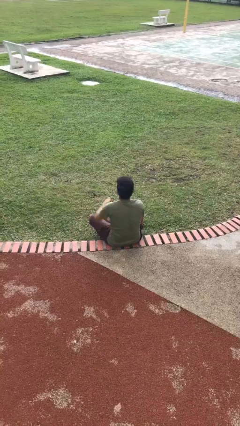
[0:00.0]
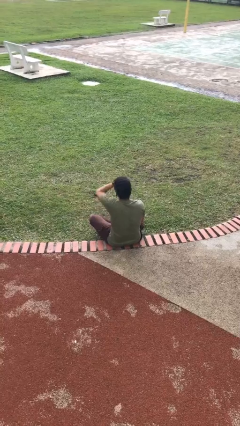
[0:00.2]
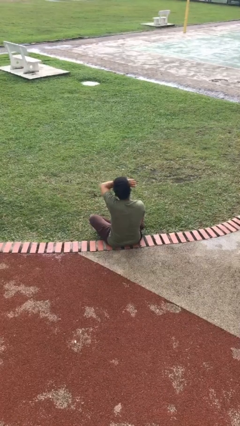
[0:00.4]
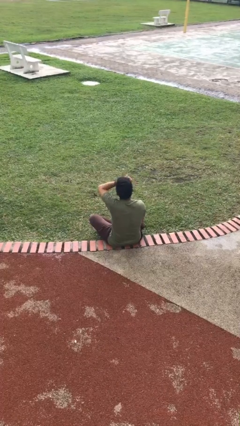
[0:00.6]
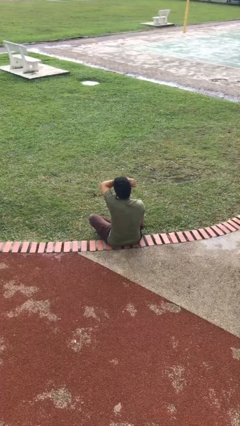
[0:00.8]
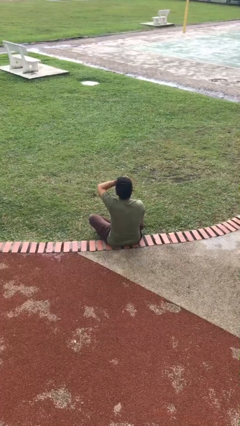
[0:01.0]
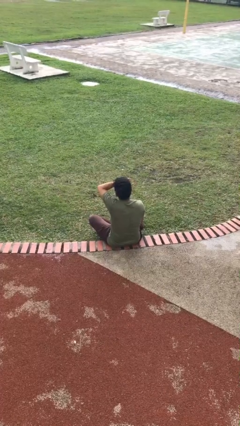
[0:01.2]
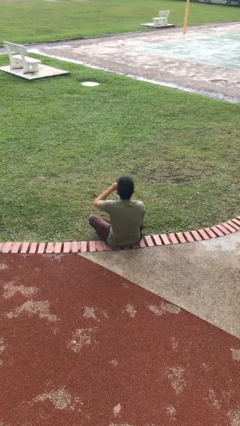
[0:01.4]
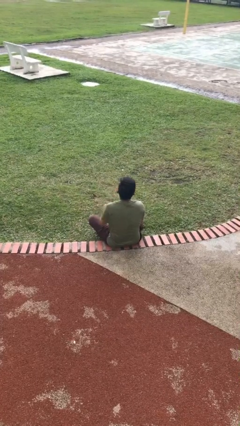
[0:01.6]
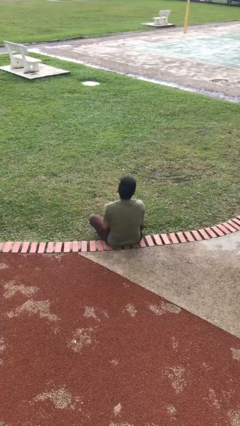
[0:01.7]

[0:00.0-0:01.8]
person rubs eyes

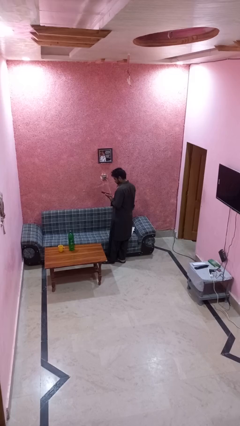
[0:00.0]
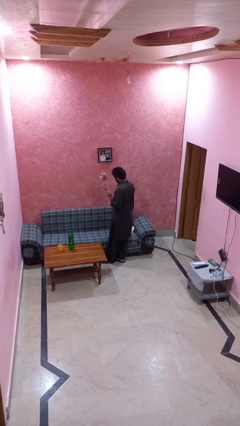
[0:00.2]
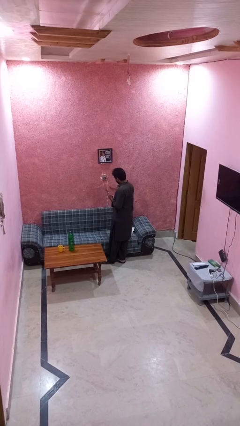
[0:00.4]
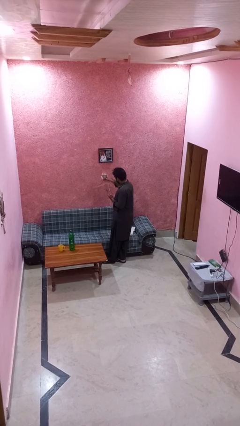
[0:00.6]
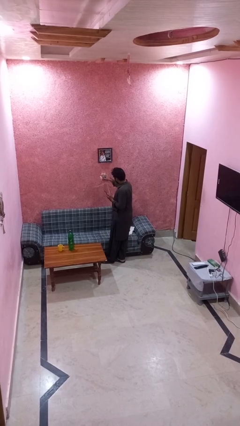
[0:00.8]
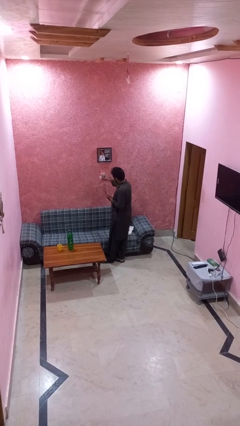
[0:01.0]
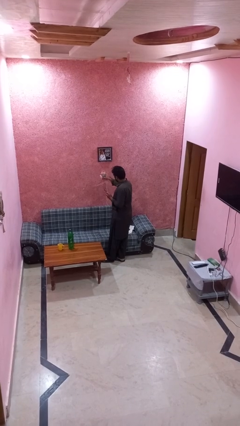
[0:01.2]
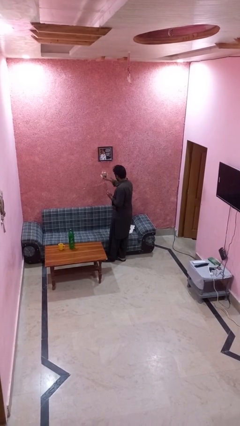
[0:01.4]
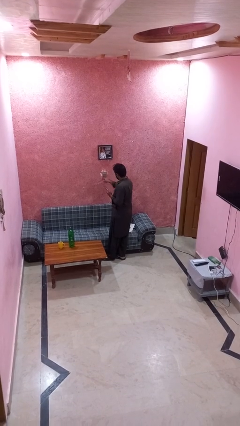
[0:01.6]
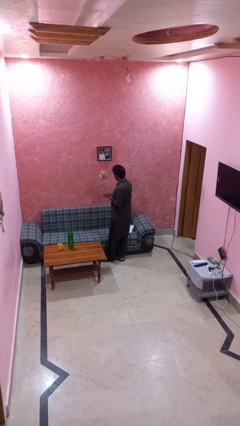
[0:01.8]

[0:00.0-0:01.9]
person unplugs from electrical socket

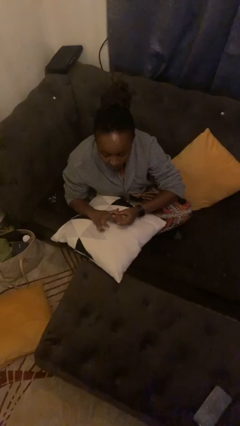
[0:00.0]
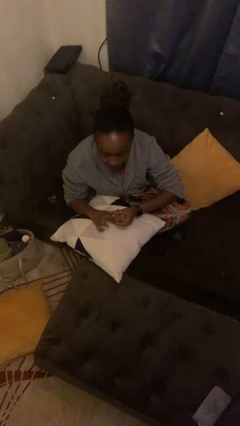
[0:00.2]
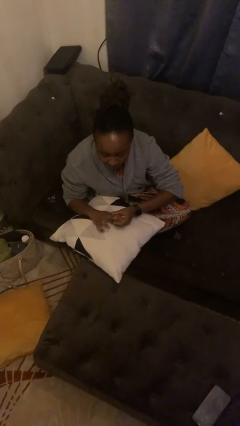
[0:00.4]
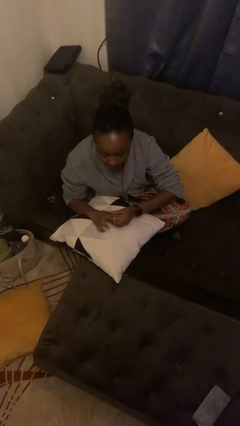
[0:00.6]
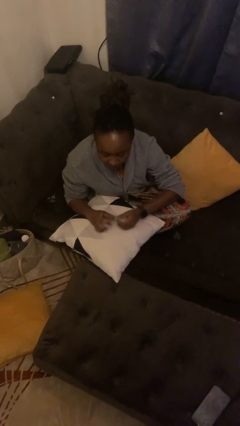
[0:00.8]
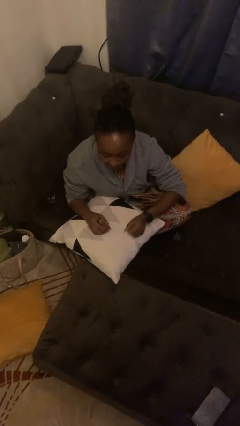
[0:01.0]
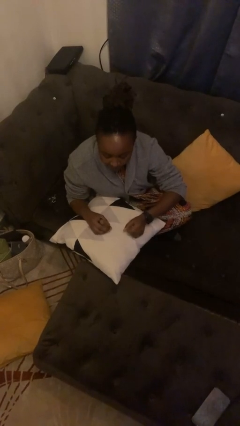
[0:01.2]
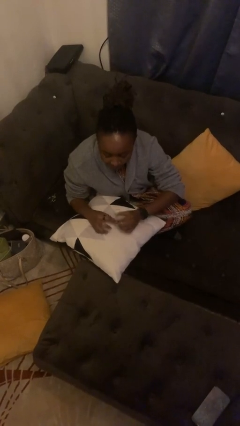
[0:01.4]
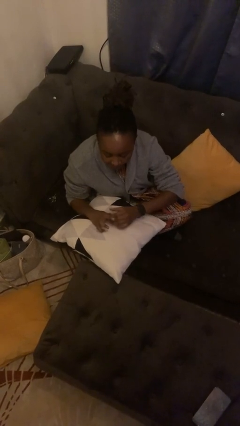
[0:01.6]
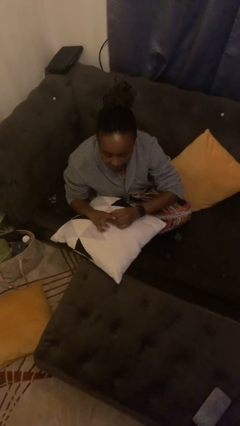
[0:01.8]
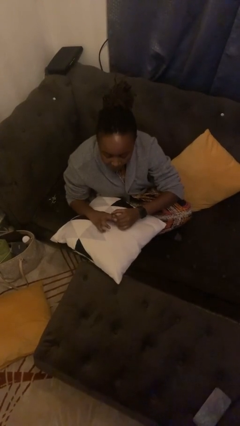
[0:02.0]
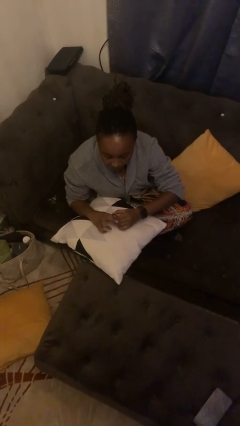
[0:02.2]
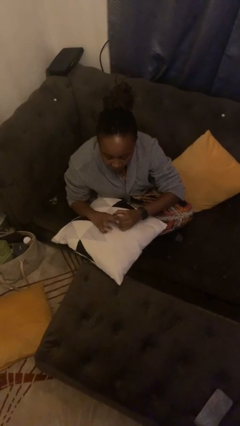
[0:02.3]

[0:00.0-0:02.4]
person puts on ring

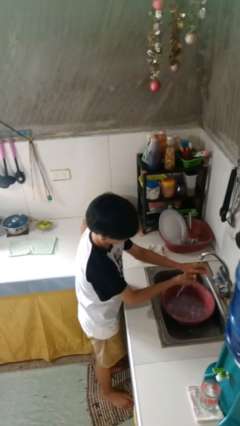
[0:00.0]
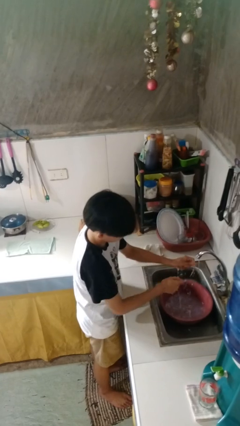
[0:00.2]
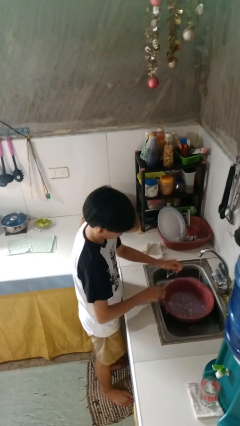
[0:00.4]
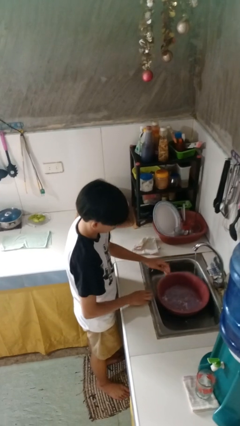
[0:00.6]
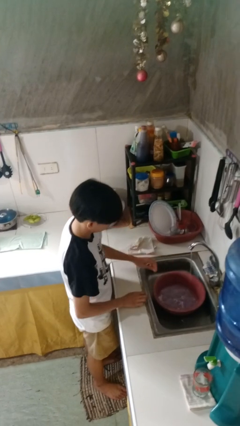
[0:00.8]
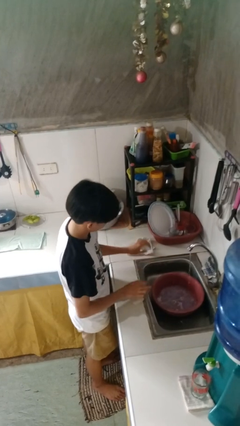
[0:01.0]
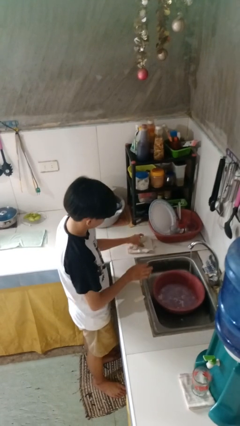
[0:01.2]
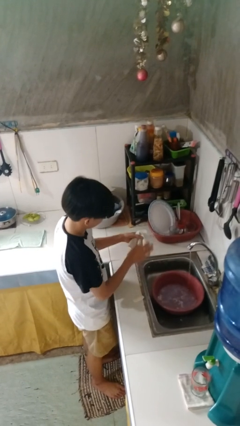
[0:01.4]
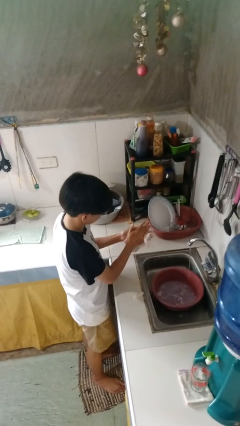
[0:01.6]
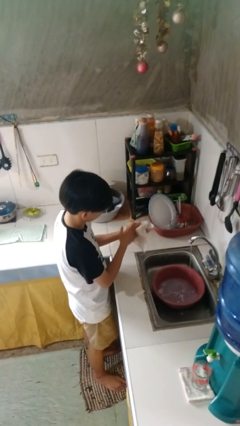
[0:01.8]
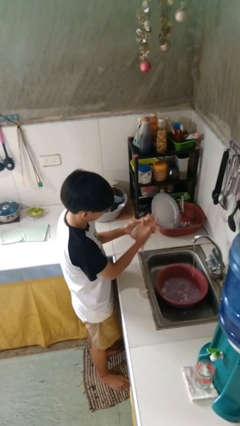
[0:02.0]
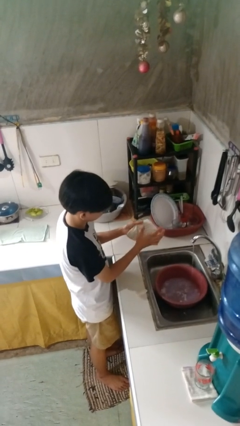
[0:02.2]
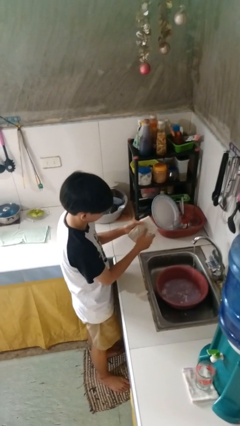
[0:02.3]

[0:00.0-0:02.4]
person dries hands with towel

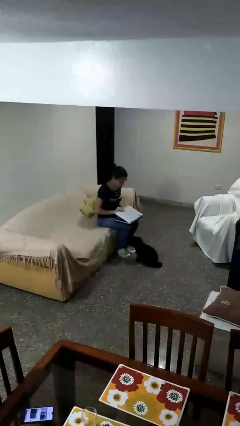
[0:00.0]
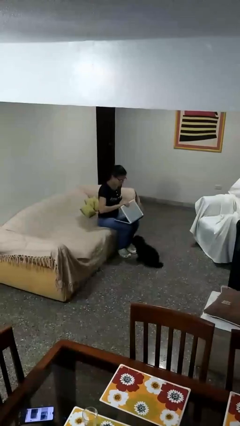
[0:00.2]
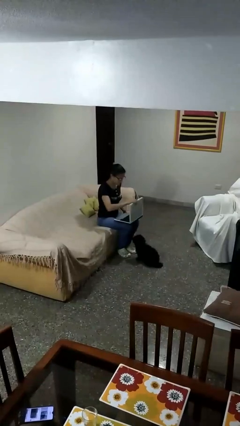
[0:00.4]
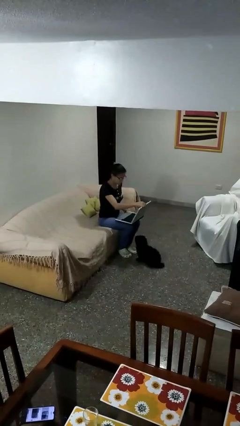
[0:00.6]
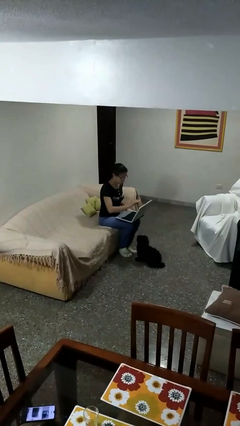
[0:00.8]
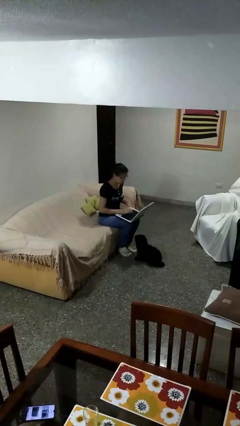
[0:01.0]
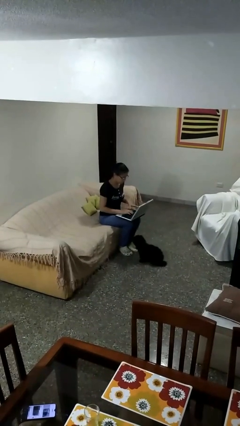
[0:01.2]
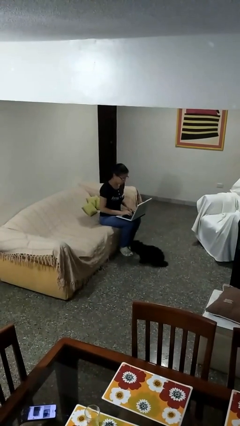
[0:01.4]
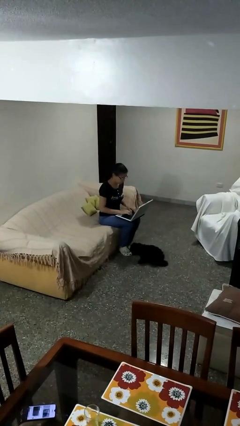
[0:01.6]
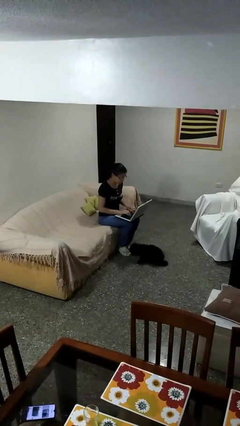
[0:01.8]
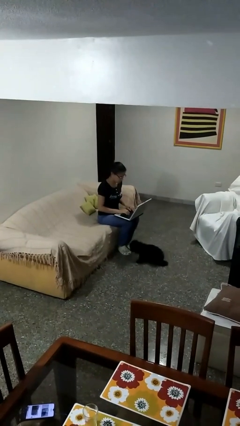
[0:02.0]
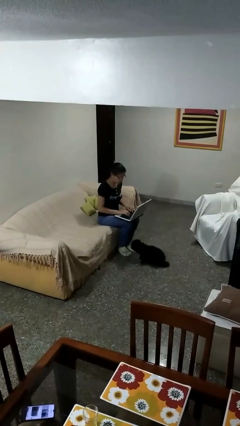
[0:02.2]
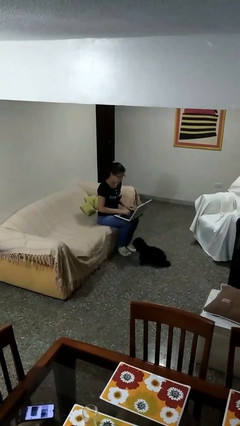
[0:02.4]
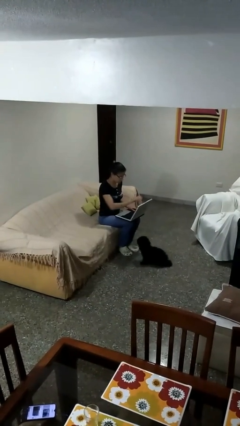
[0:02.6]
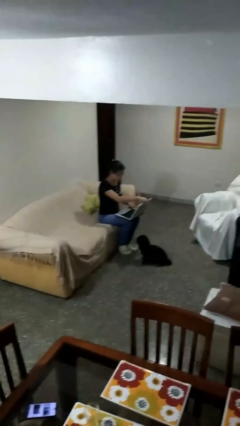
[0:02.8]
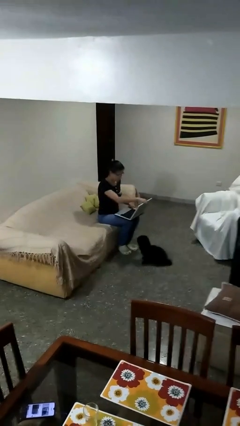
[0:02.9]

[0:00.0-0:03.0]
person interacts with laptop

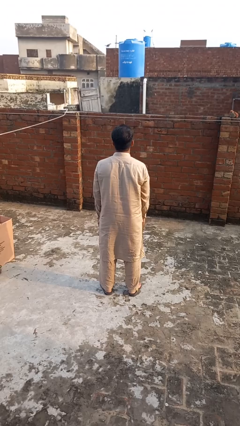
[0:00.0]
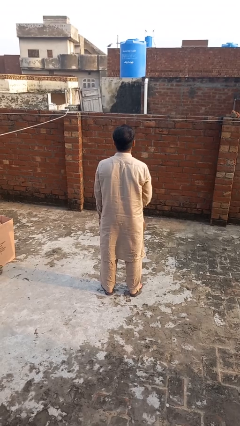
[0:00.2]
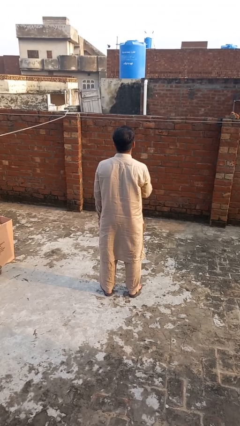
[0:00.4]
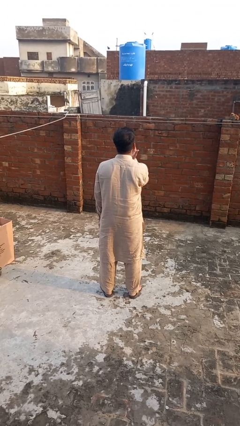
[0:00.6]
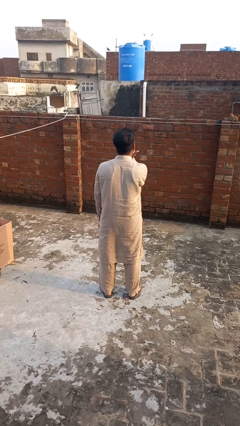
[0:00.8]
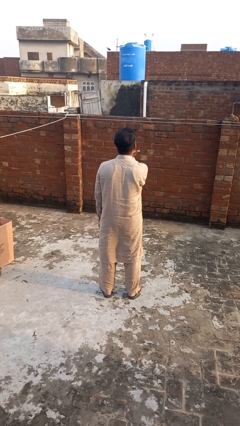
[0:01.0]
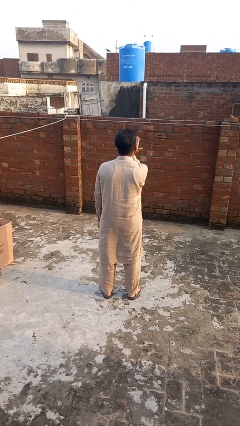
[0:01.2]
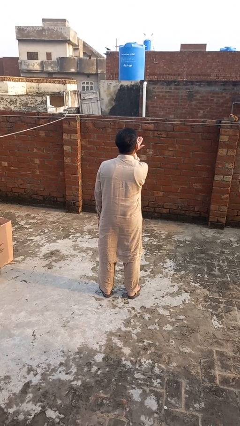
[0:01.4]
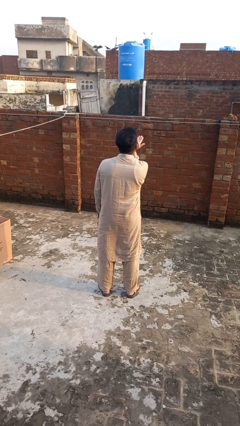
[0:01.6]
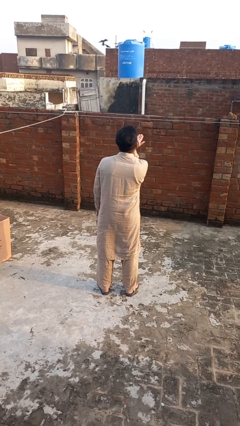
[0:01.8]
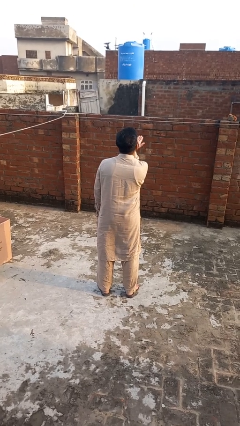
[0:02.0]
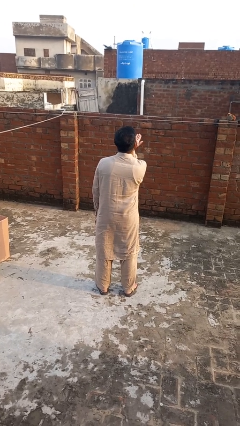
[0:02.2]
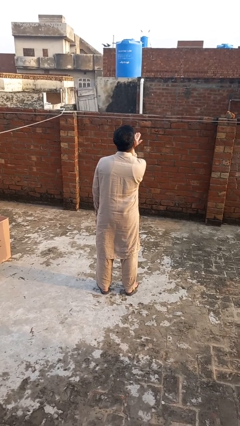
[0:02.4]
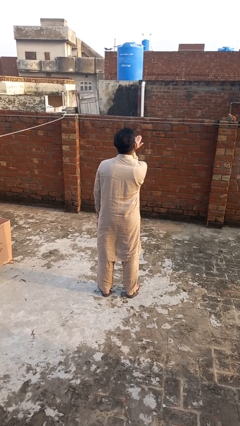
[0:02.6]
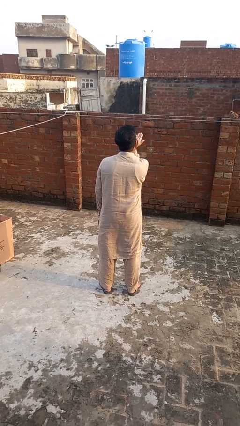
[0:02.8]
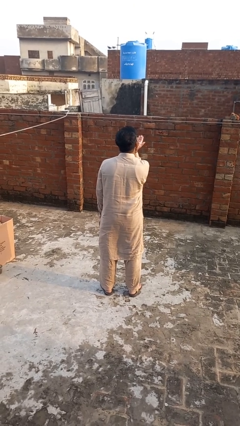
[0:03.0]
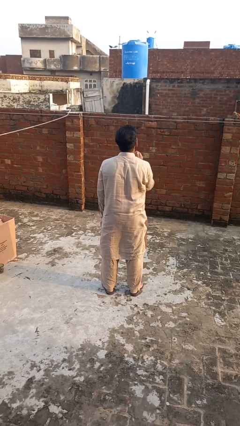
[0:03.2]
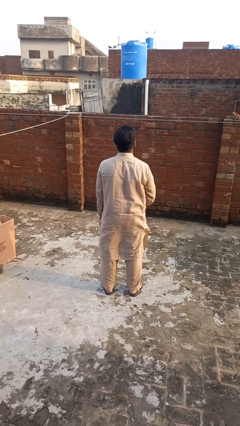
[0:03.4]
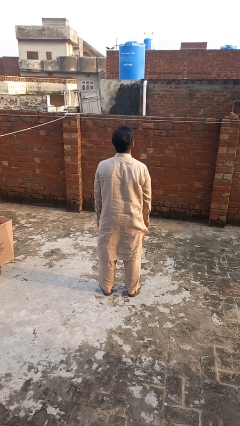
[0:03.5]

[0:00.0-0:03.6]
person gestures blow kiss

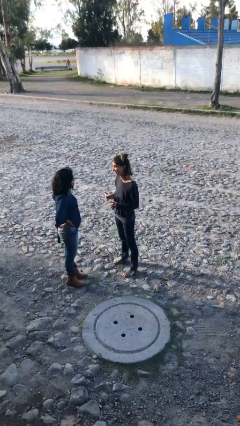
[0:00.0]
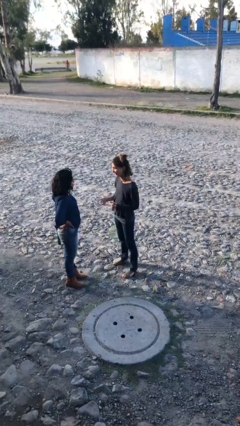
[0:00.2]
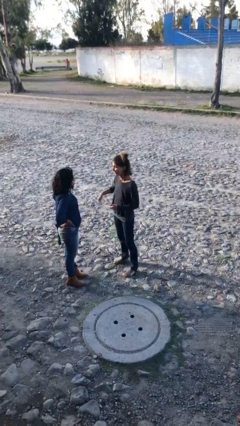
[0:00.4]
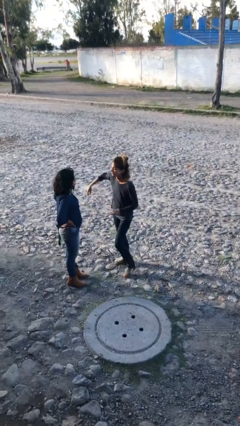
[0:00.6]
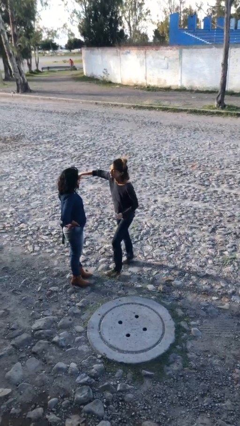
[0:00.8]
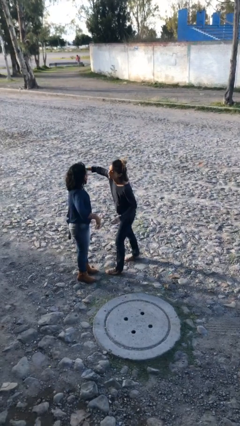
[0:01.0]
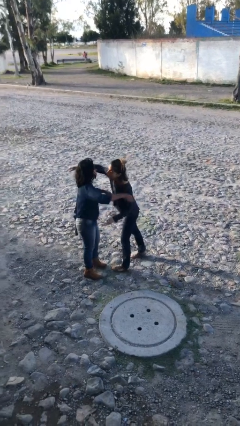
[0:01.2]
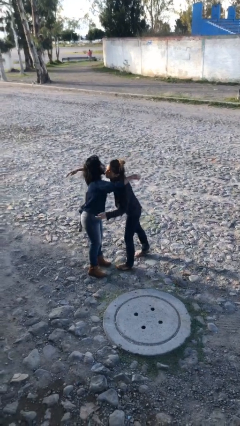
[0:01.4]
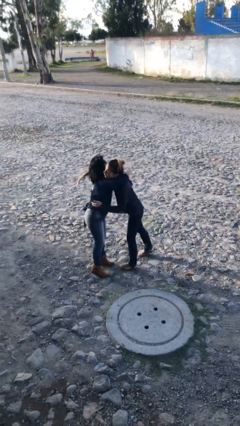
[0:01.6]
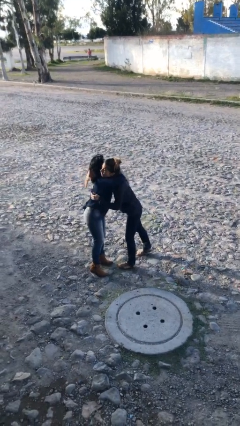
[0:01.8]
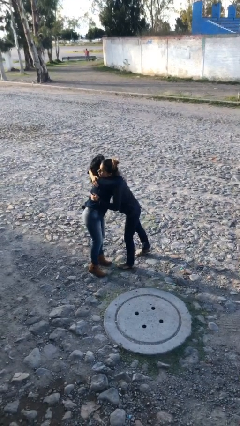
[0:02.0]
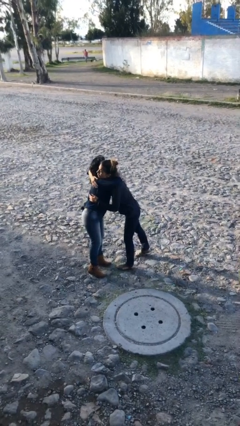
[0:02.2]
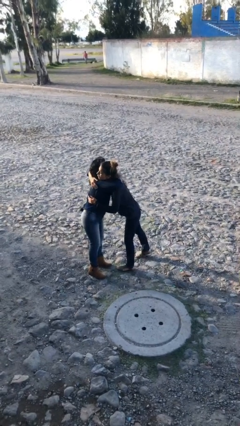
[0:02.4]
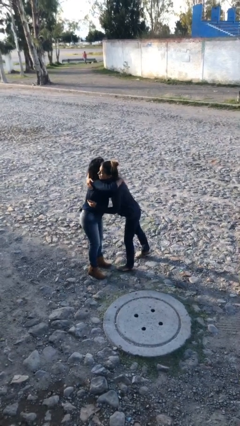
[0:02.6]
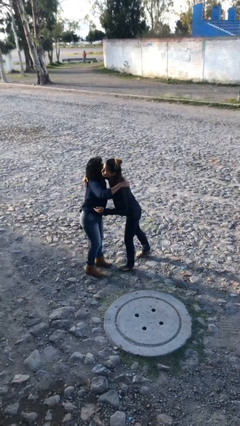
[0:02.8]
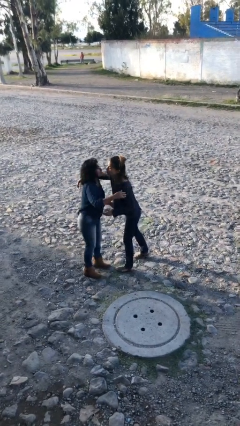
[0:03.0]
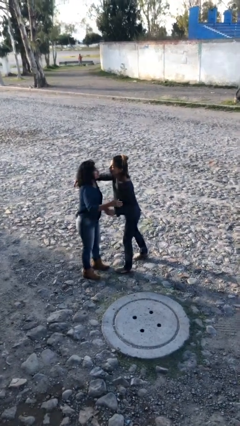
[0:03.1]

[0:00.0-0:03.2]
person embraces person
